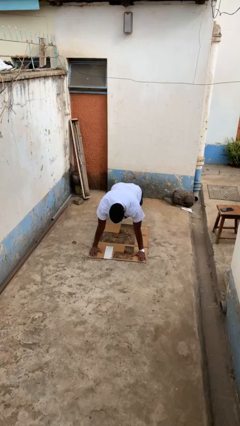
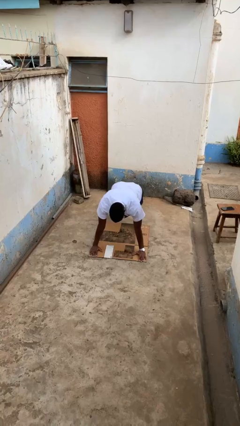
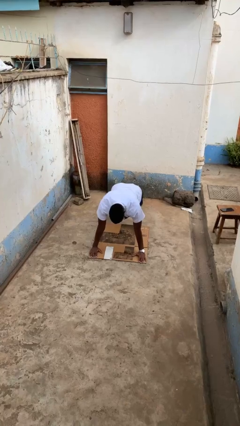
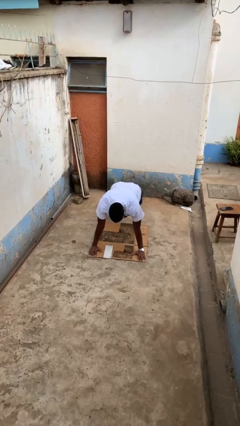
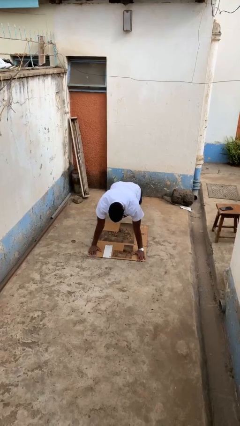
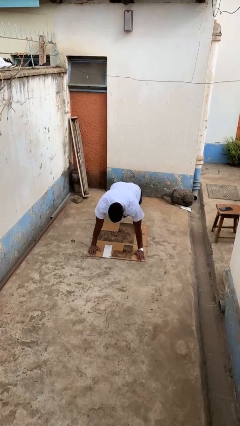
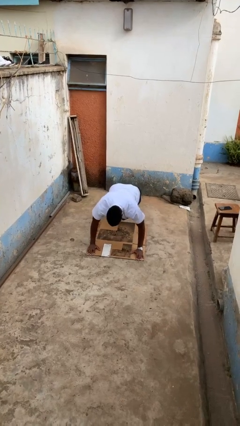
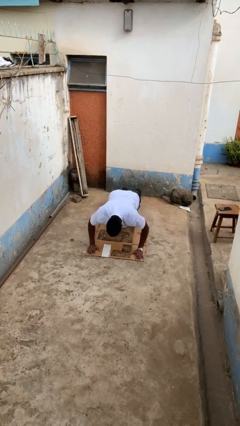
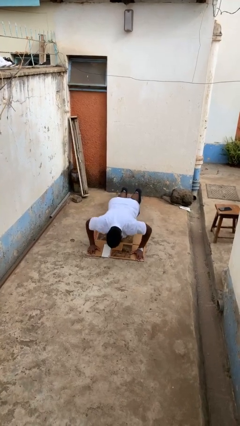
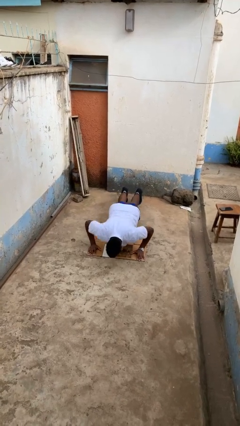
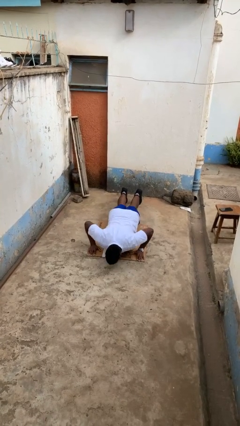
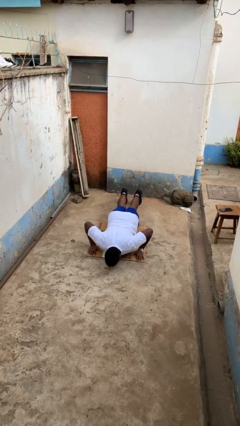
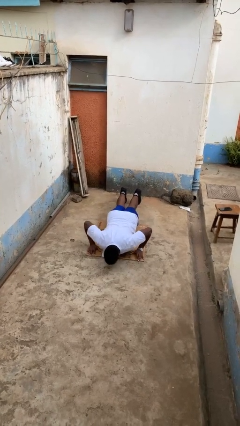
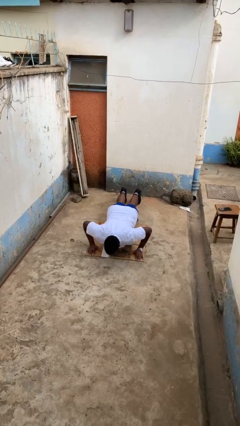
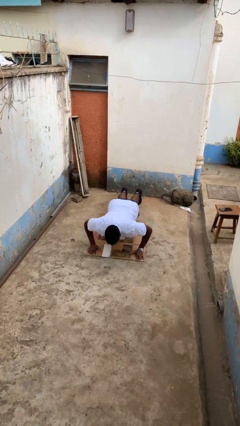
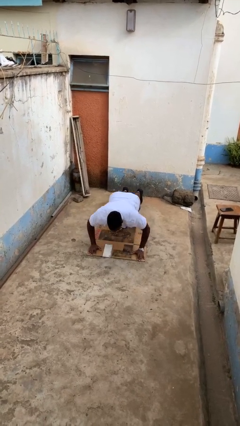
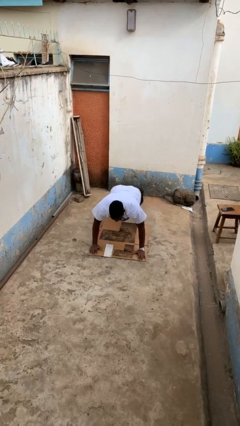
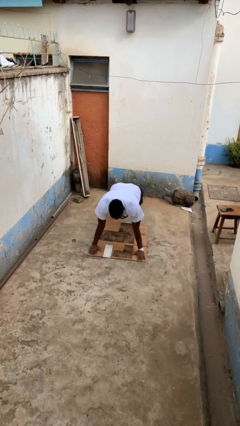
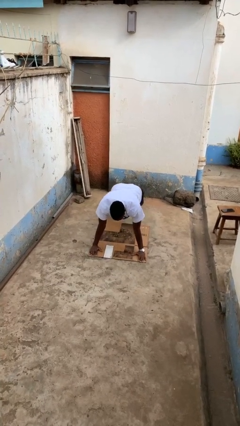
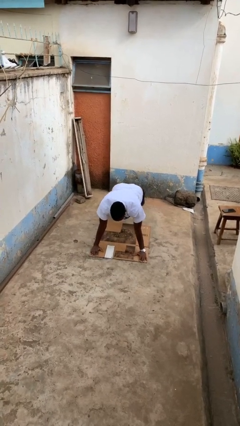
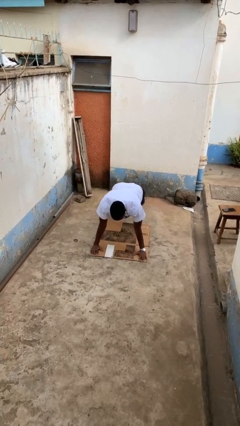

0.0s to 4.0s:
person exercises with pushup

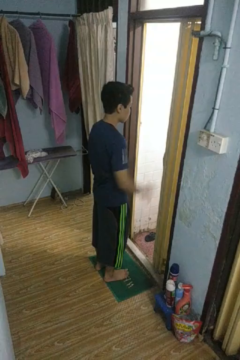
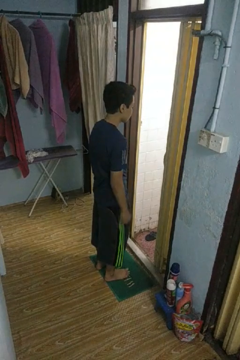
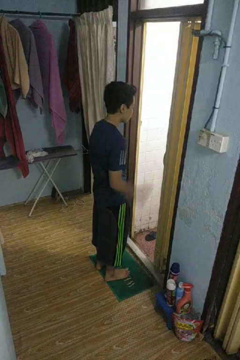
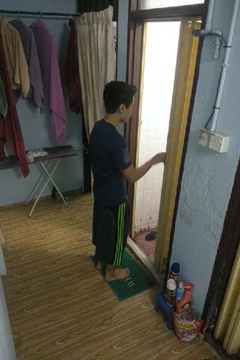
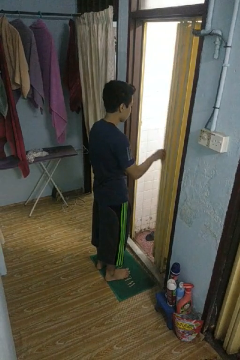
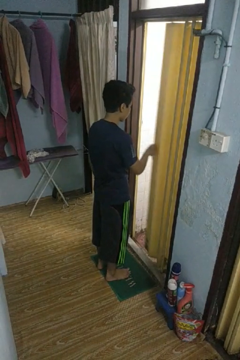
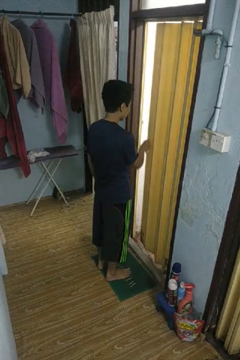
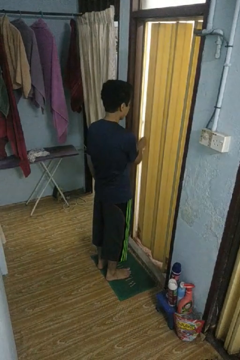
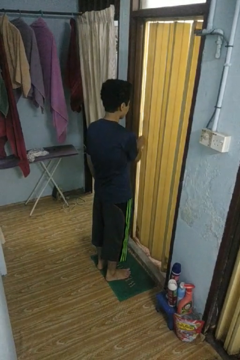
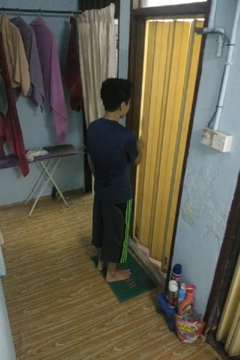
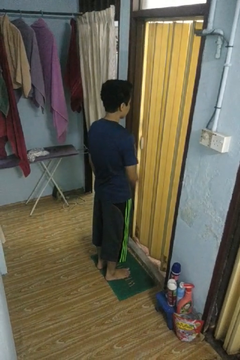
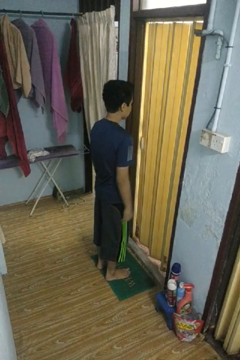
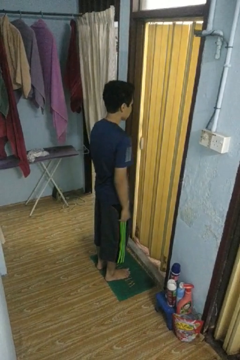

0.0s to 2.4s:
person closes sliding door

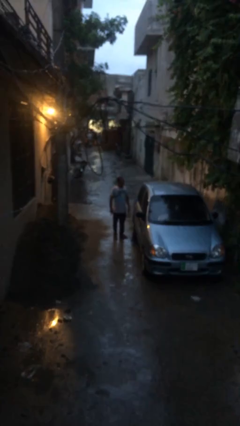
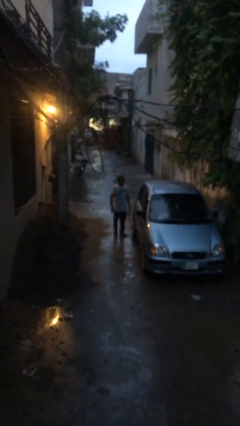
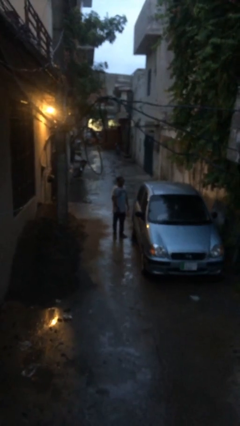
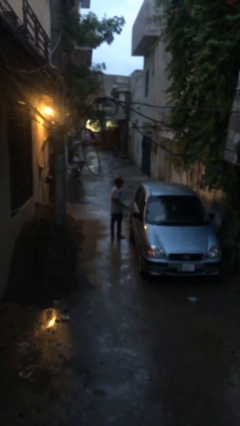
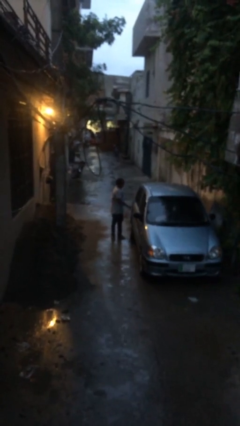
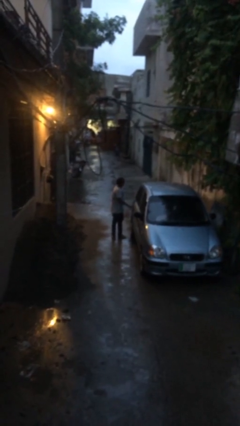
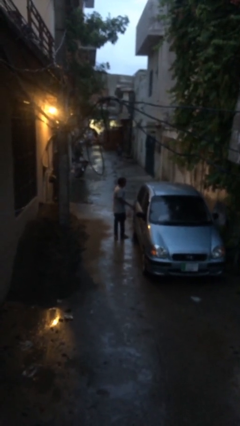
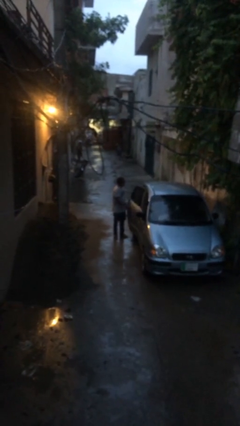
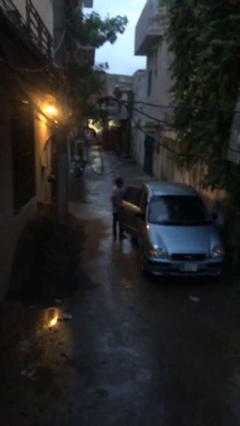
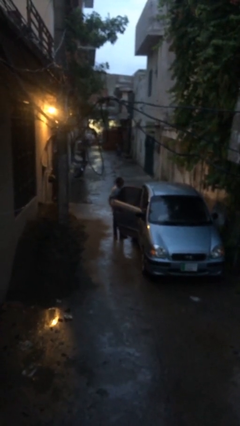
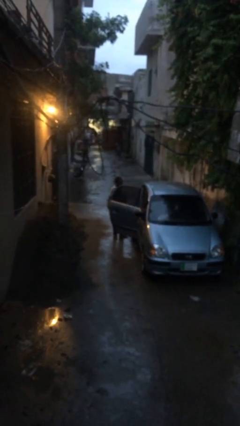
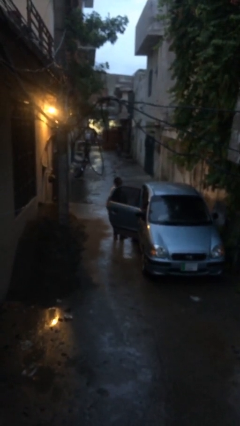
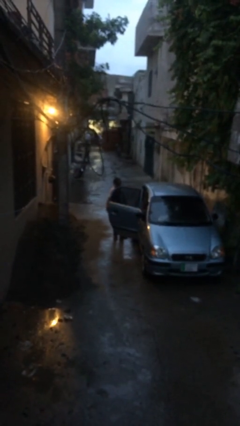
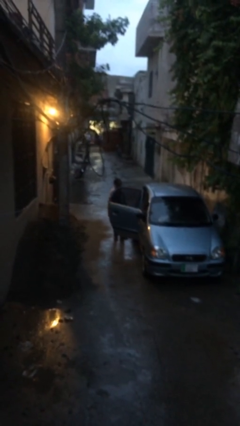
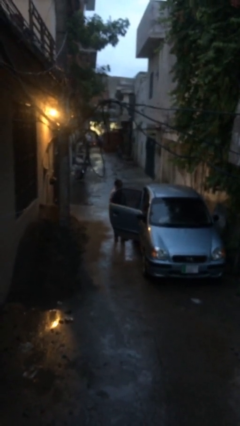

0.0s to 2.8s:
person opens car door

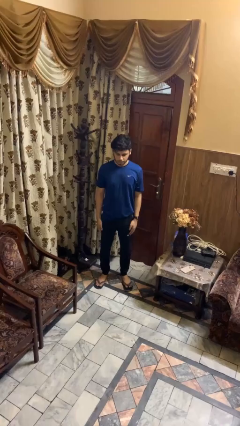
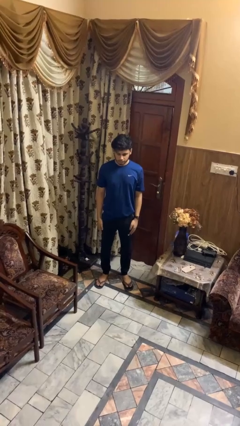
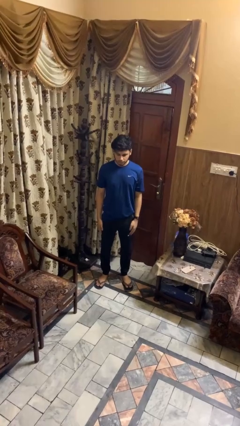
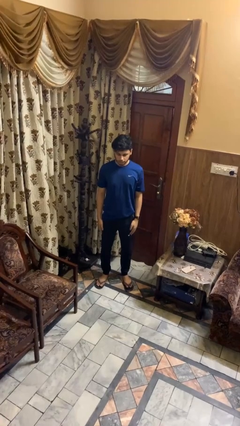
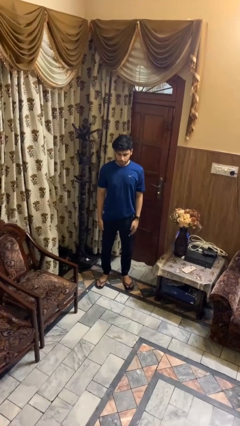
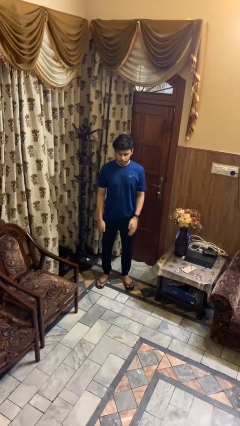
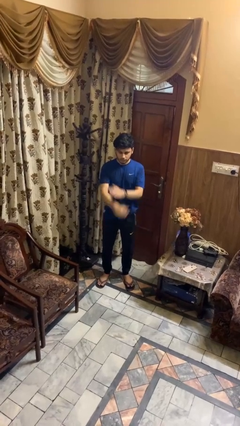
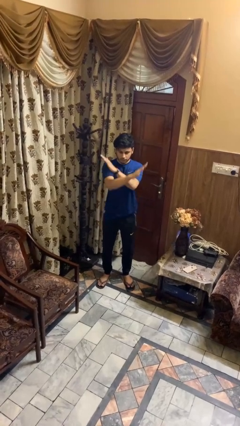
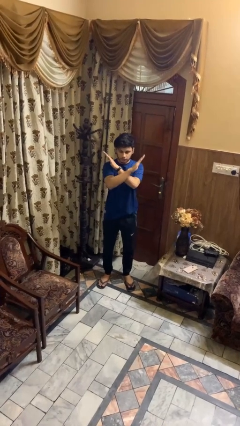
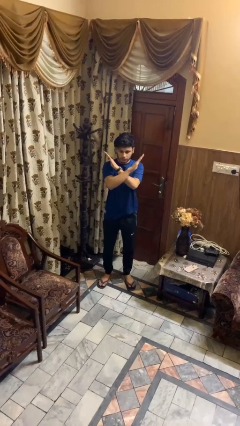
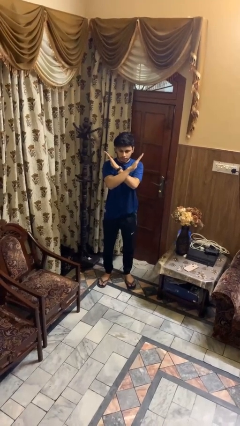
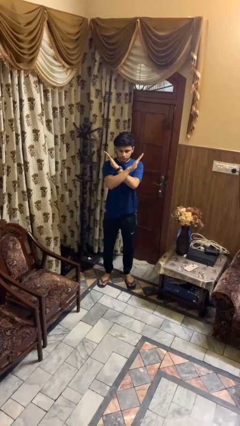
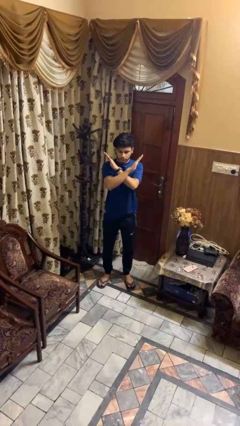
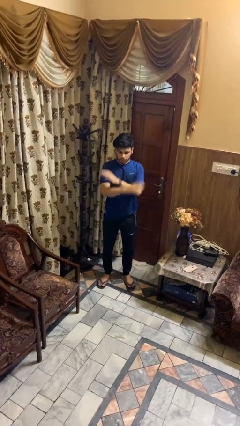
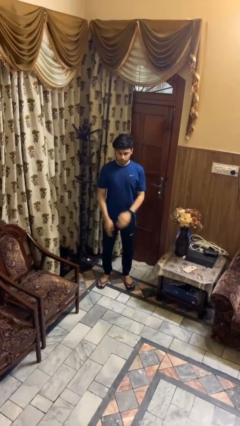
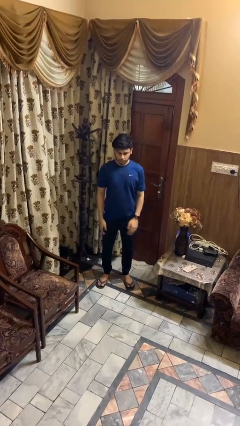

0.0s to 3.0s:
person gestures arms x

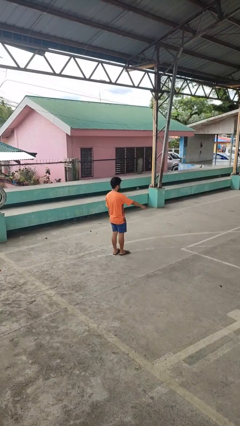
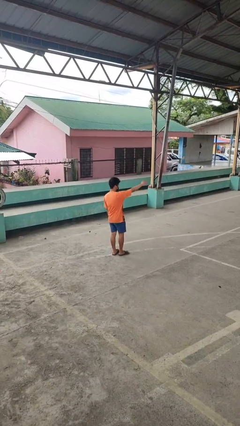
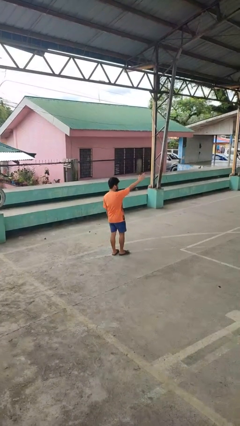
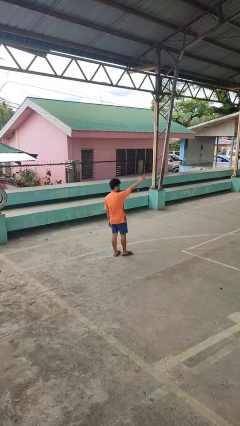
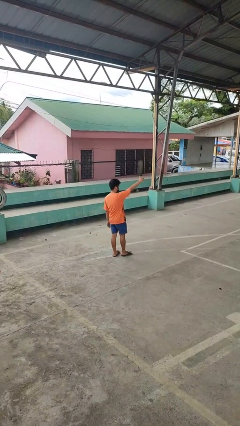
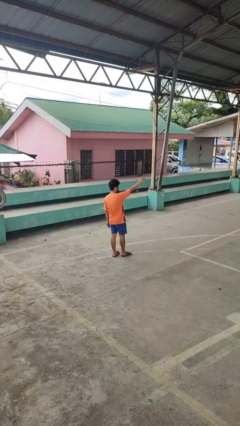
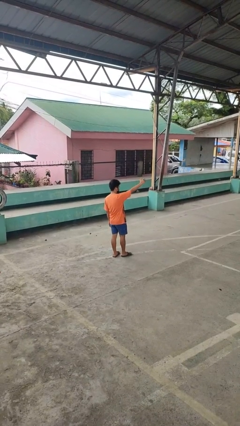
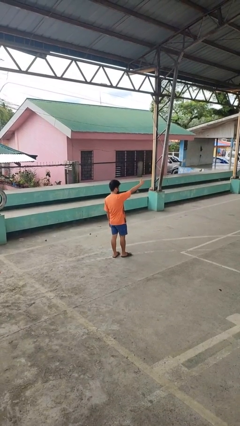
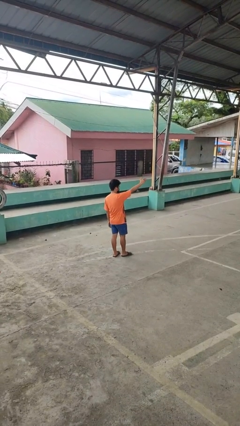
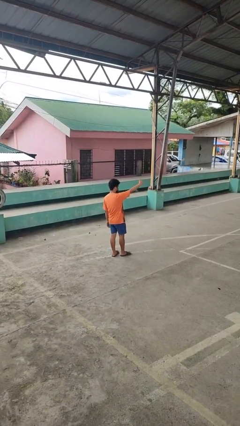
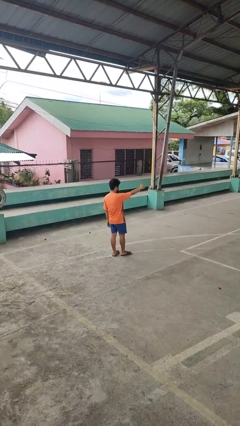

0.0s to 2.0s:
person gestures come here

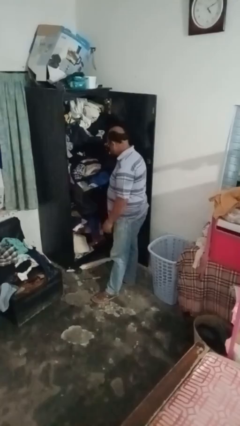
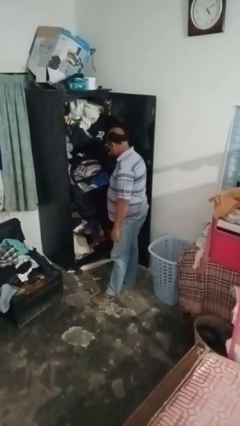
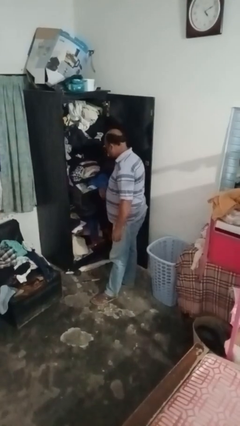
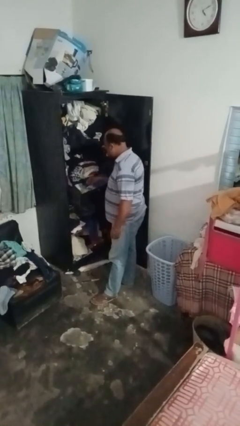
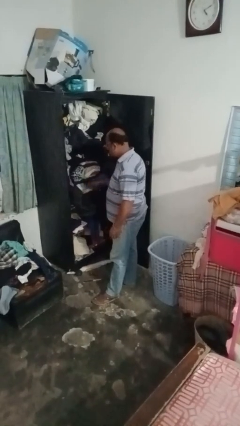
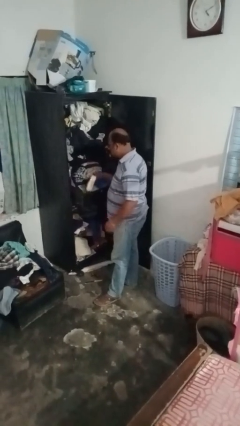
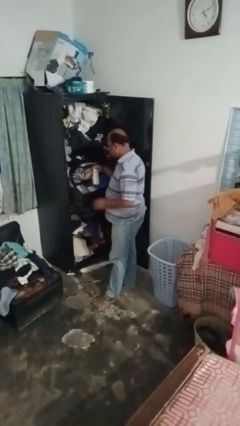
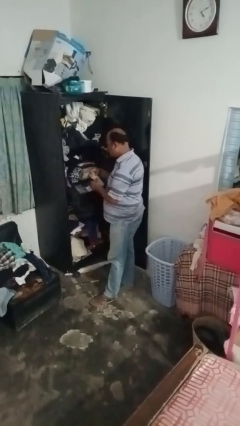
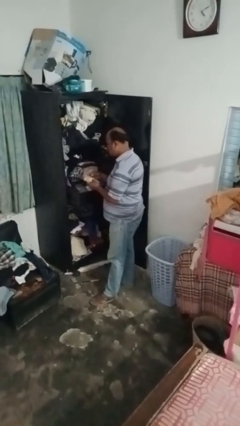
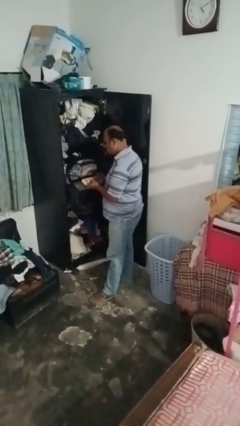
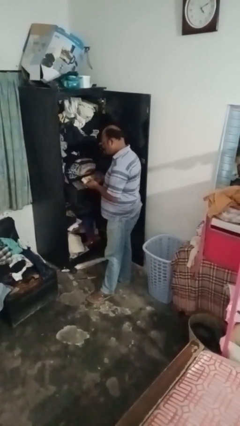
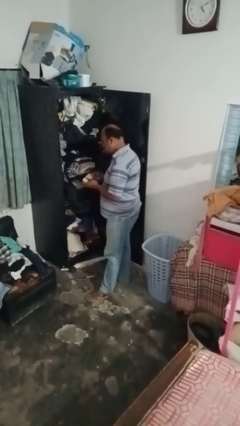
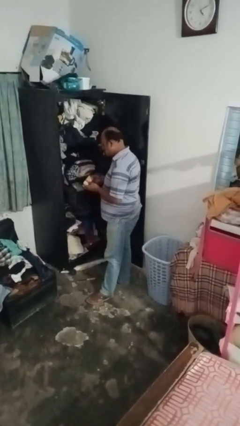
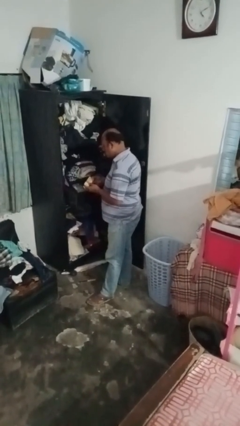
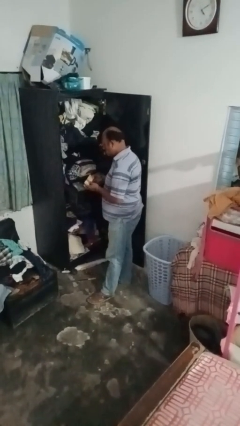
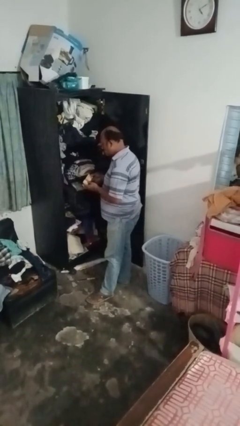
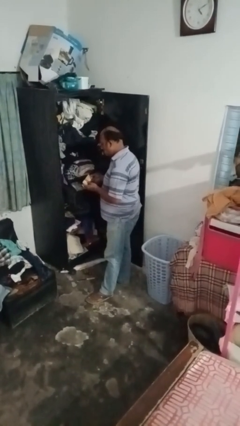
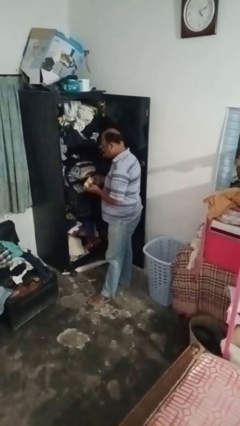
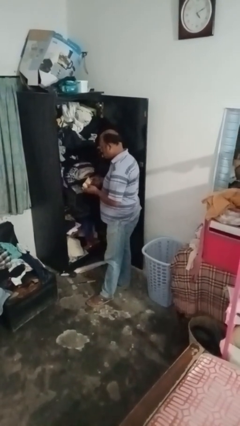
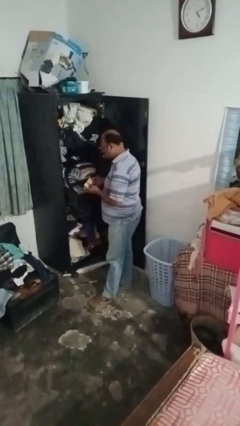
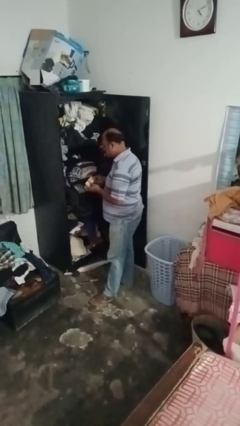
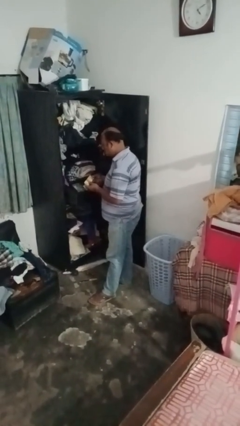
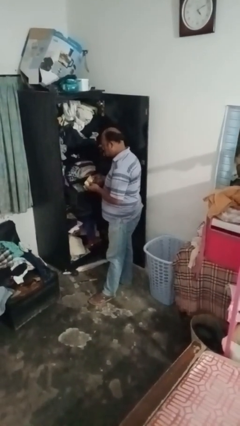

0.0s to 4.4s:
person puts clothes into dresser
